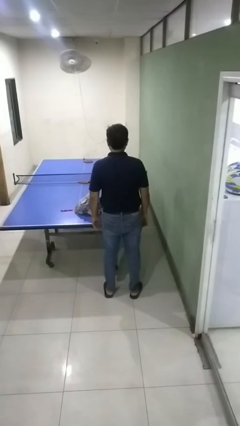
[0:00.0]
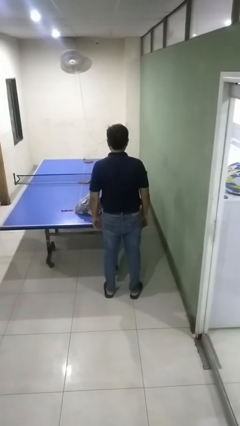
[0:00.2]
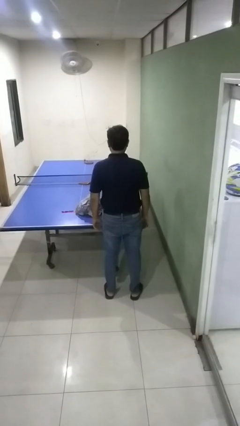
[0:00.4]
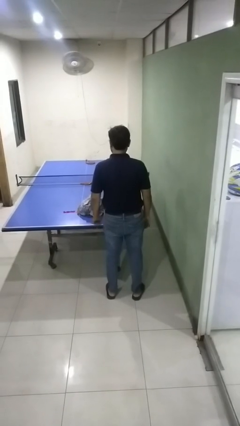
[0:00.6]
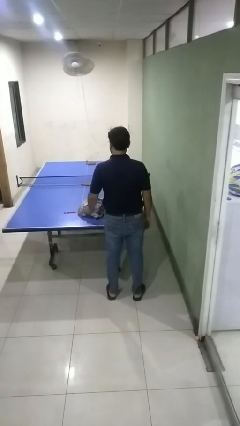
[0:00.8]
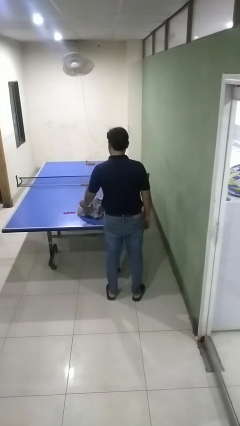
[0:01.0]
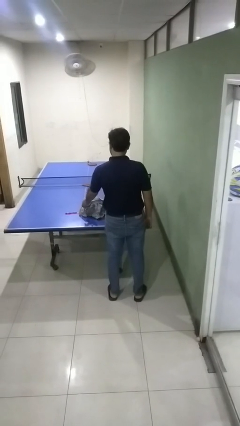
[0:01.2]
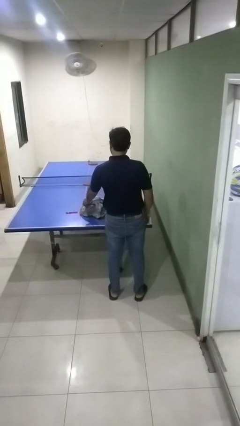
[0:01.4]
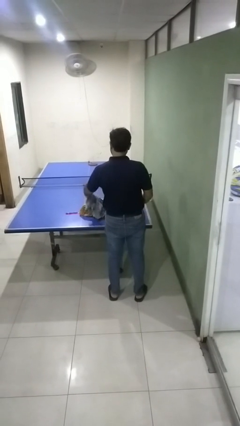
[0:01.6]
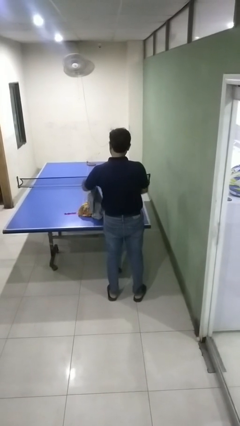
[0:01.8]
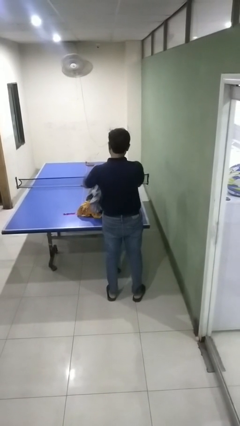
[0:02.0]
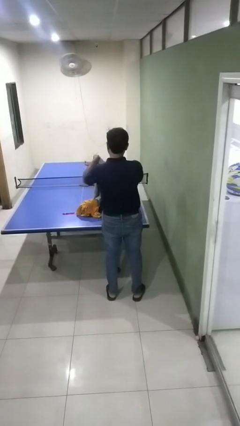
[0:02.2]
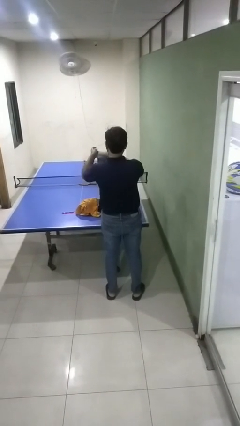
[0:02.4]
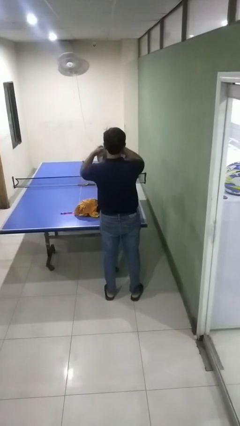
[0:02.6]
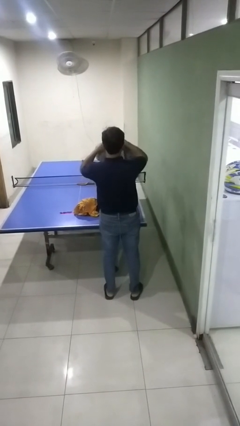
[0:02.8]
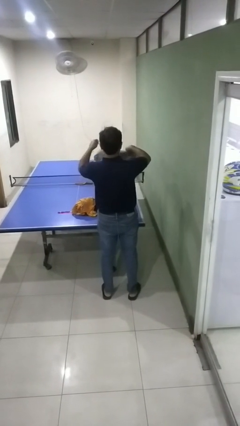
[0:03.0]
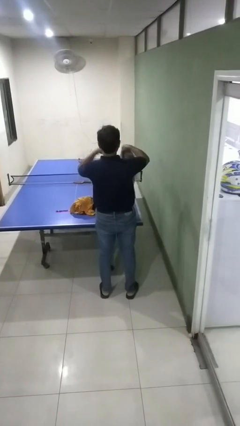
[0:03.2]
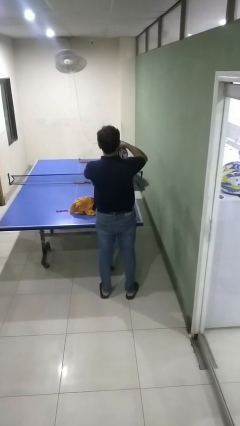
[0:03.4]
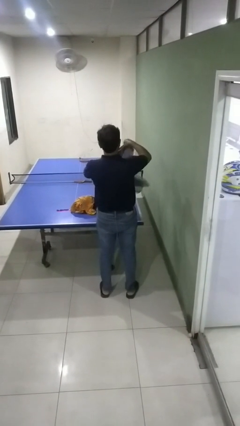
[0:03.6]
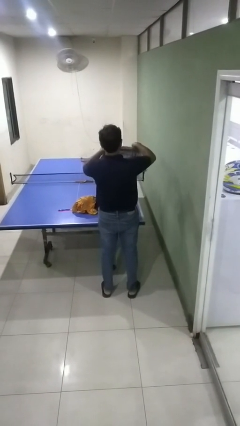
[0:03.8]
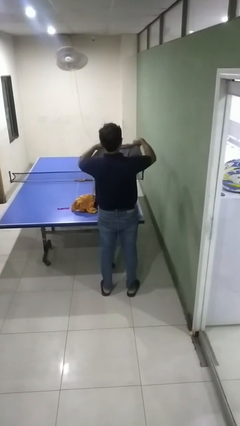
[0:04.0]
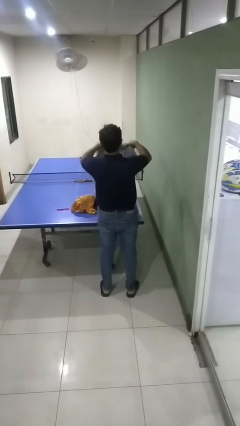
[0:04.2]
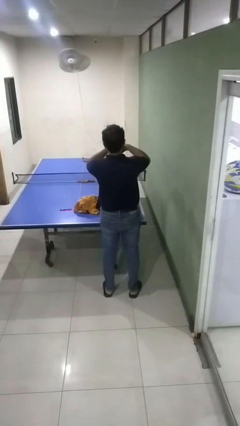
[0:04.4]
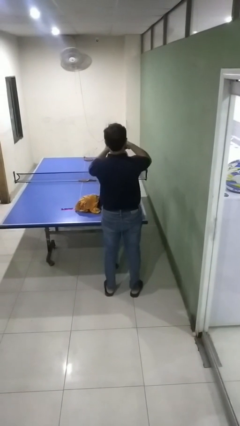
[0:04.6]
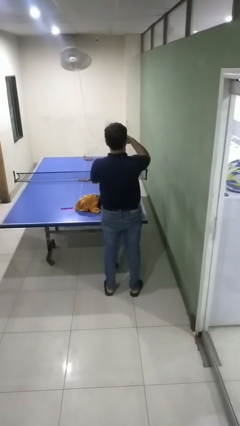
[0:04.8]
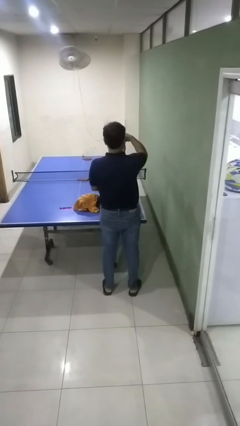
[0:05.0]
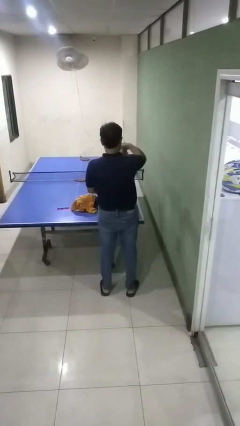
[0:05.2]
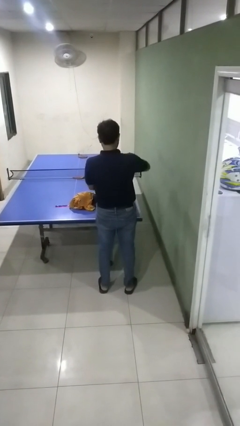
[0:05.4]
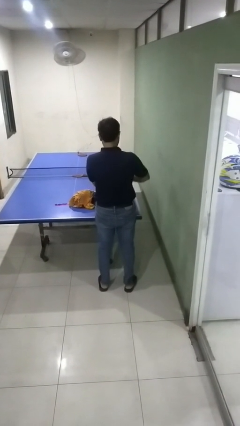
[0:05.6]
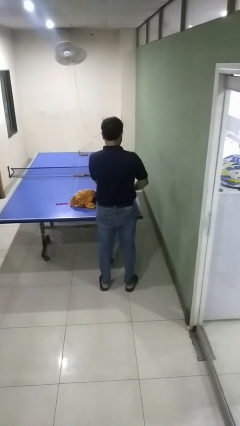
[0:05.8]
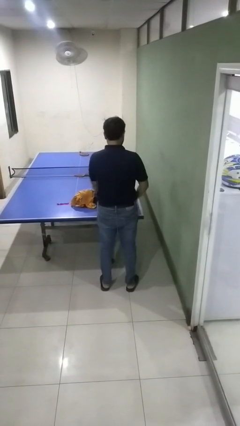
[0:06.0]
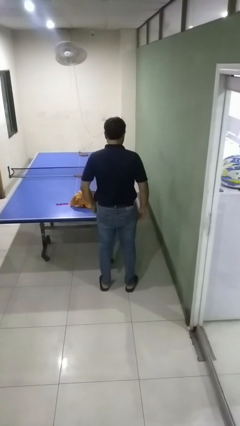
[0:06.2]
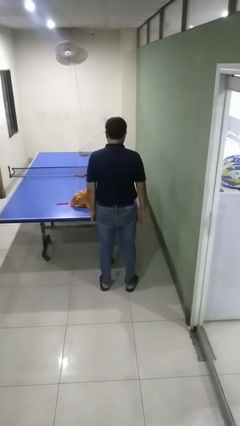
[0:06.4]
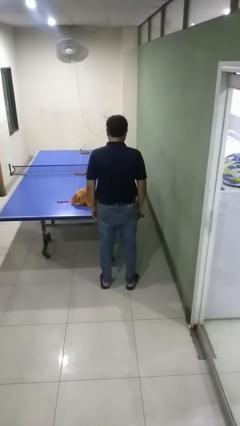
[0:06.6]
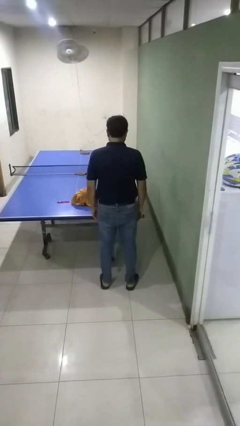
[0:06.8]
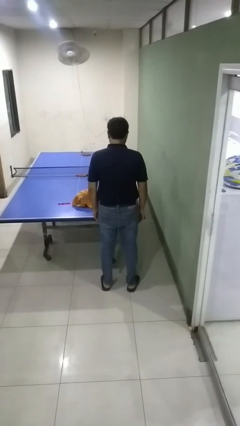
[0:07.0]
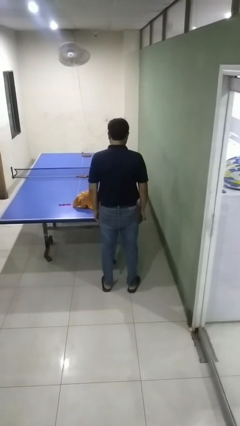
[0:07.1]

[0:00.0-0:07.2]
person folds shirt

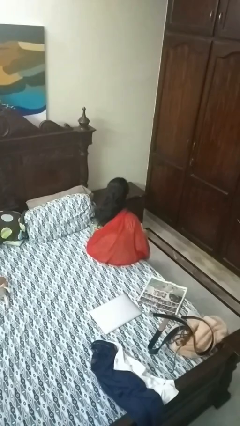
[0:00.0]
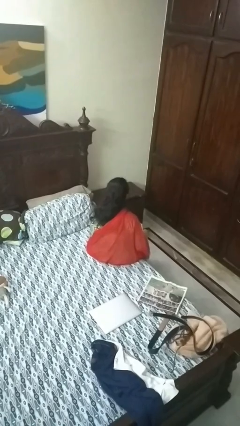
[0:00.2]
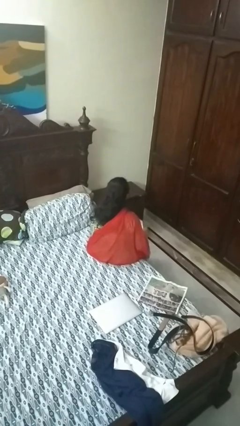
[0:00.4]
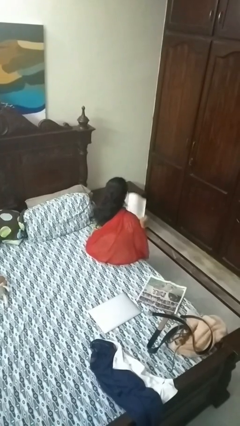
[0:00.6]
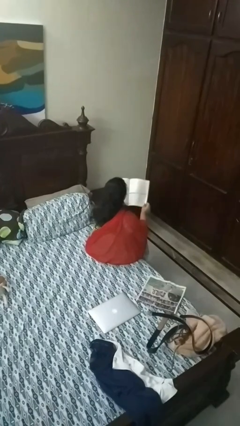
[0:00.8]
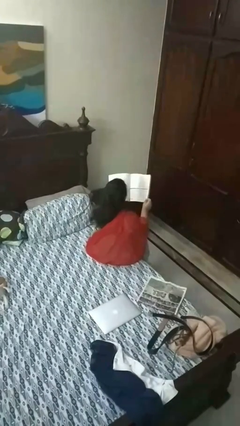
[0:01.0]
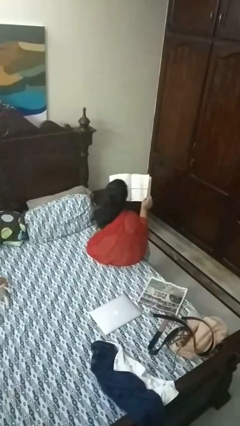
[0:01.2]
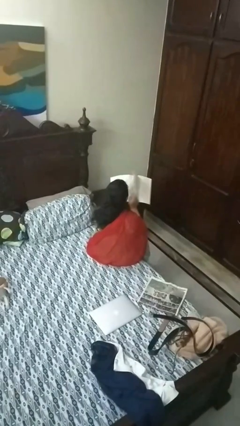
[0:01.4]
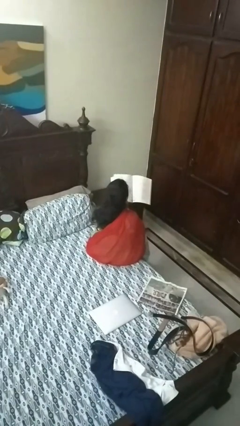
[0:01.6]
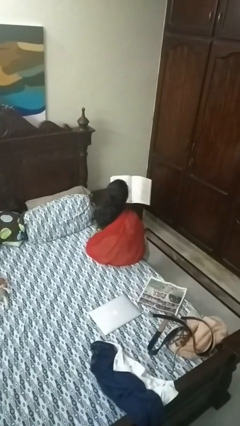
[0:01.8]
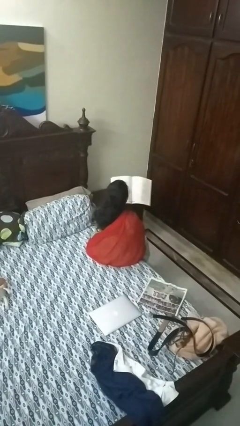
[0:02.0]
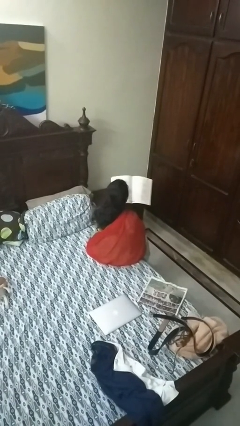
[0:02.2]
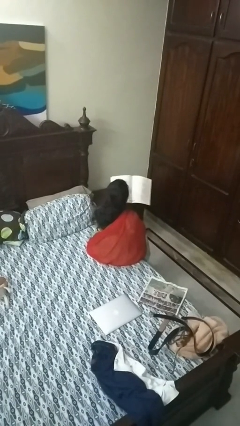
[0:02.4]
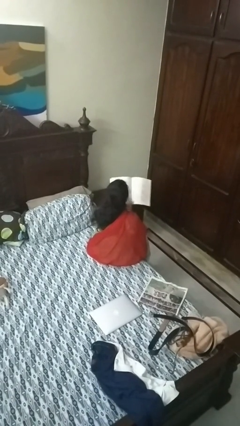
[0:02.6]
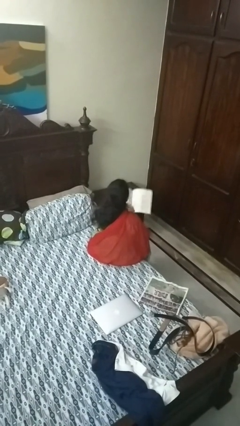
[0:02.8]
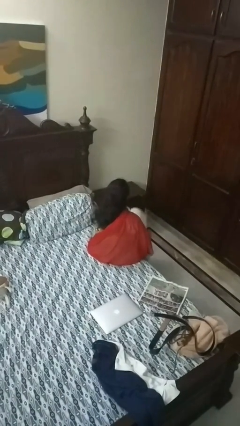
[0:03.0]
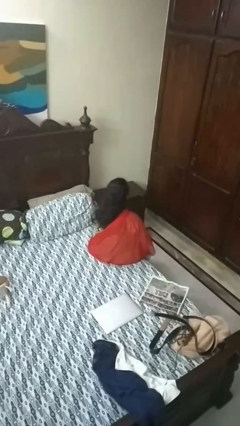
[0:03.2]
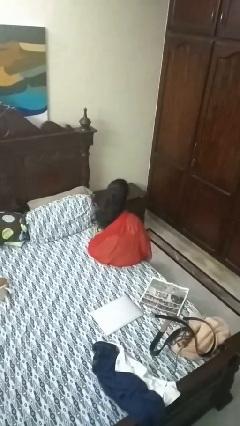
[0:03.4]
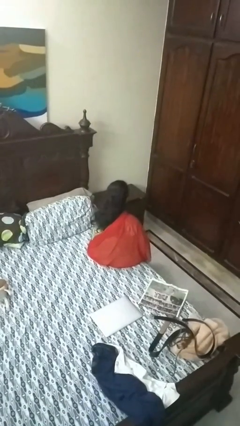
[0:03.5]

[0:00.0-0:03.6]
person reads book

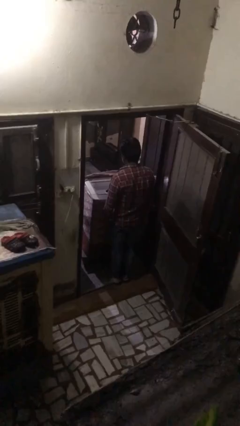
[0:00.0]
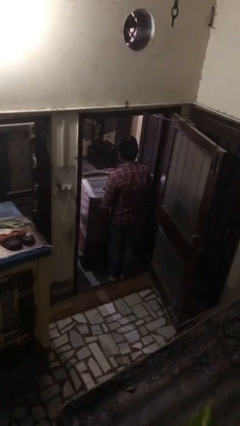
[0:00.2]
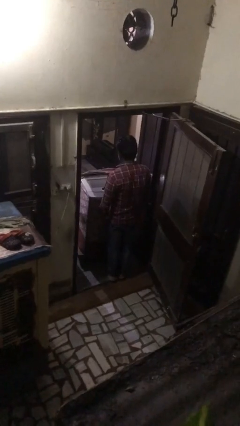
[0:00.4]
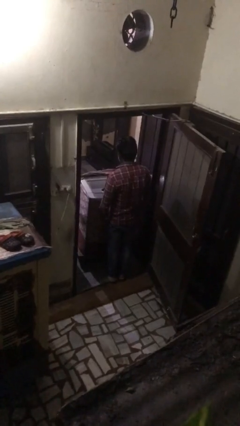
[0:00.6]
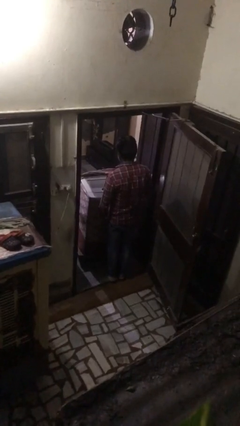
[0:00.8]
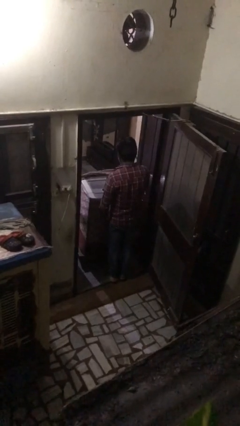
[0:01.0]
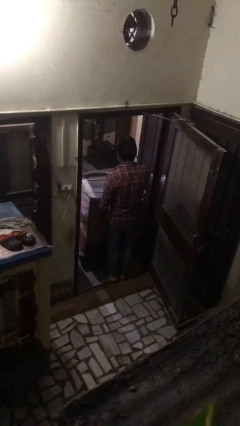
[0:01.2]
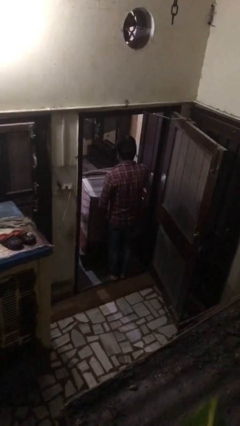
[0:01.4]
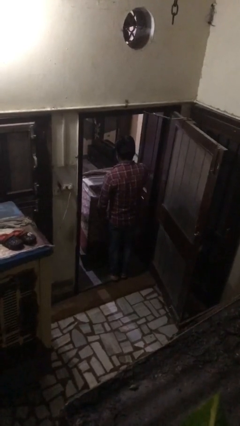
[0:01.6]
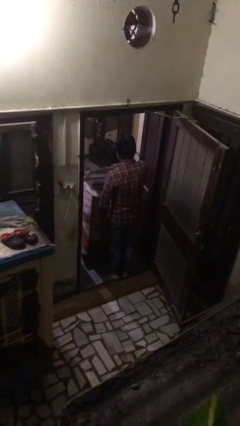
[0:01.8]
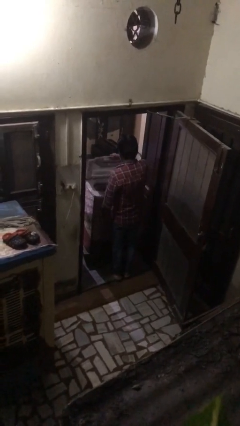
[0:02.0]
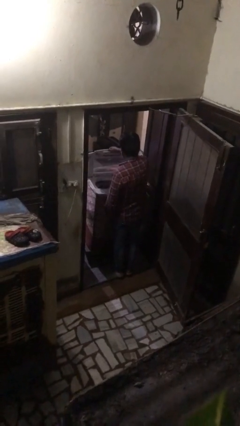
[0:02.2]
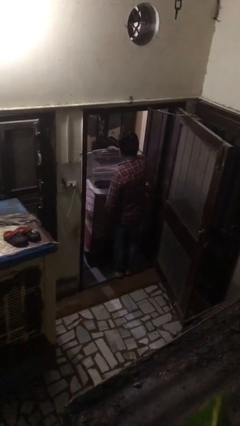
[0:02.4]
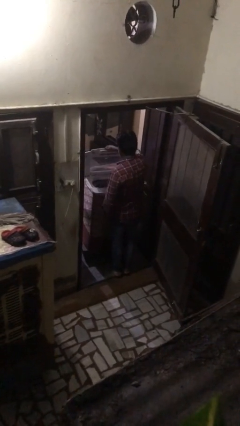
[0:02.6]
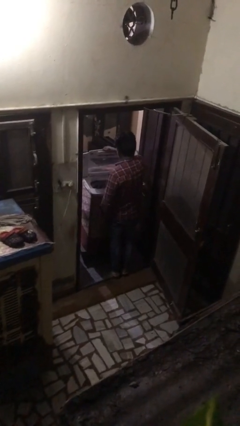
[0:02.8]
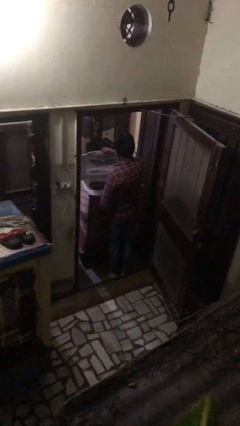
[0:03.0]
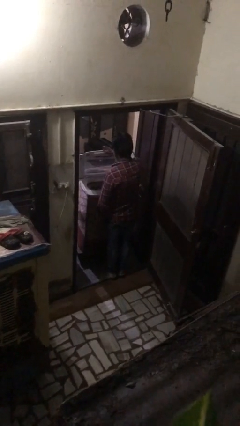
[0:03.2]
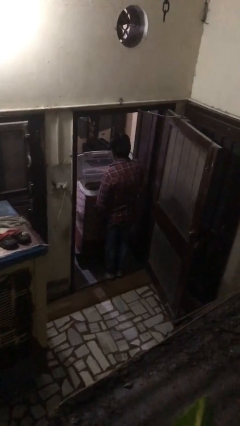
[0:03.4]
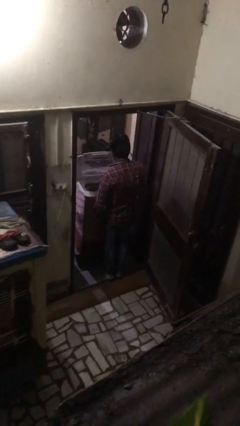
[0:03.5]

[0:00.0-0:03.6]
person opens clothes washer

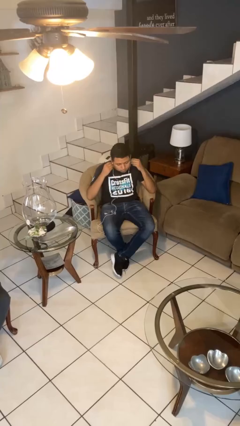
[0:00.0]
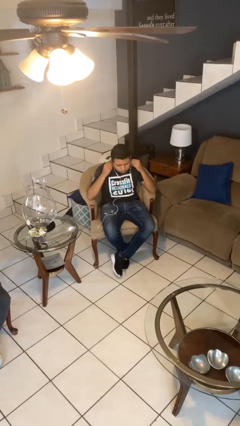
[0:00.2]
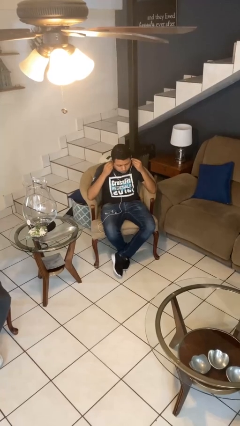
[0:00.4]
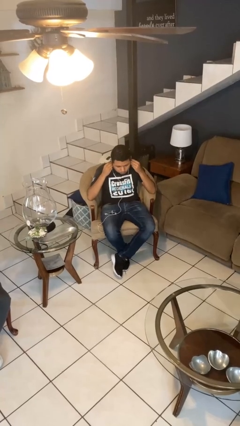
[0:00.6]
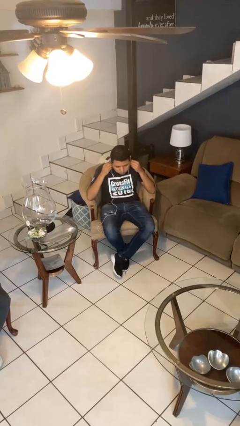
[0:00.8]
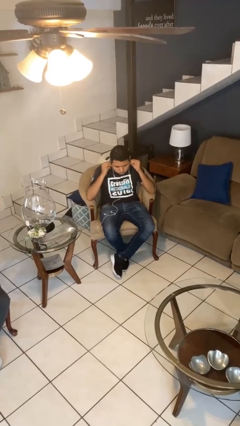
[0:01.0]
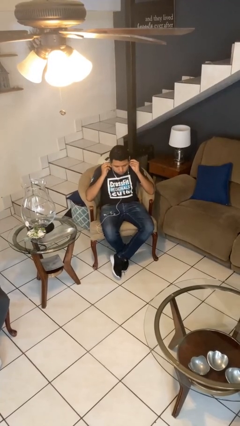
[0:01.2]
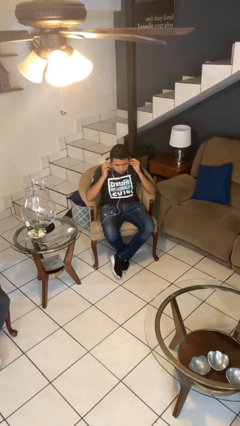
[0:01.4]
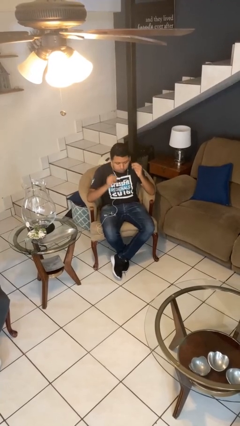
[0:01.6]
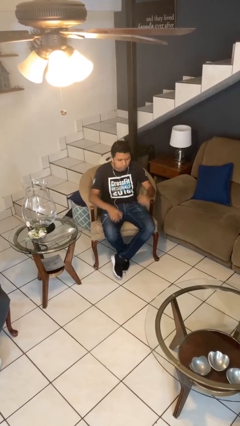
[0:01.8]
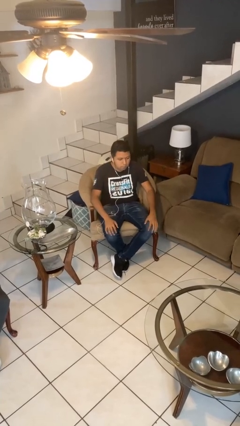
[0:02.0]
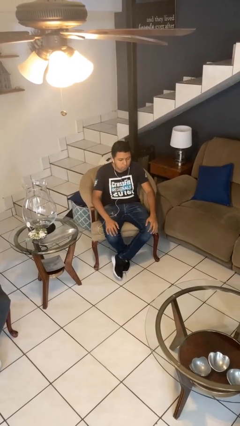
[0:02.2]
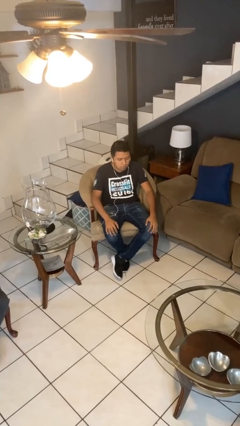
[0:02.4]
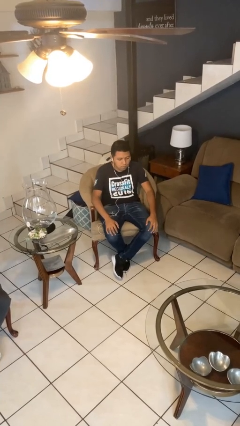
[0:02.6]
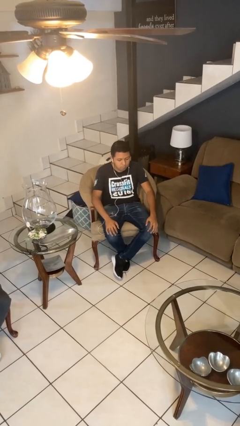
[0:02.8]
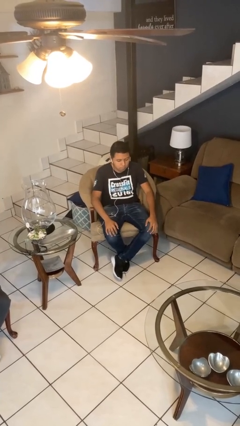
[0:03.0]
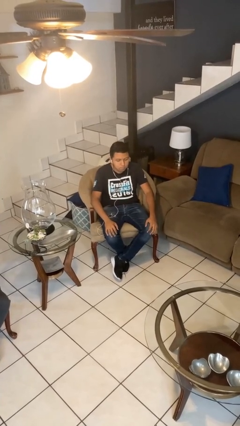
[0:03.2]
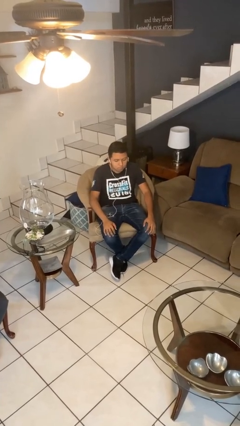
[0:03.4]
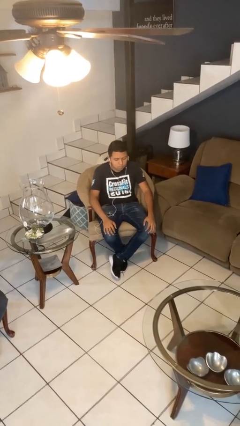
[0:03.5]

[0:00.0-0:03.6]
person puts on headphones
